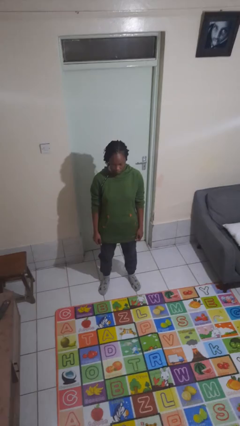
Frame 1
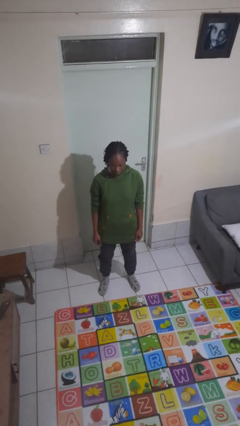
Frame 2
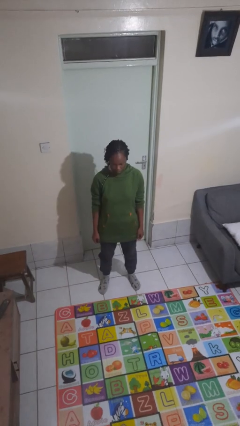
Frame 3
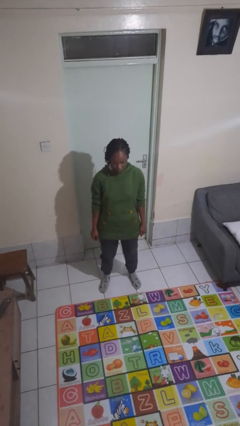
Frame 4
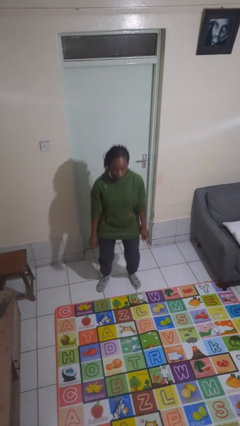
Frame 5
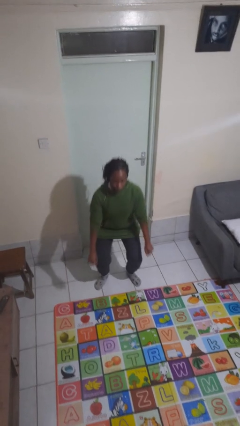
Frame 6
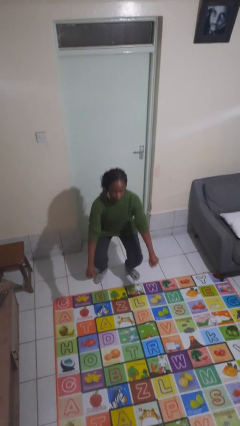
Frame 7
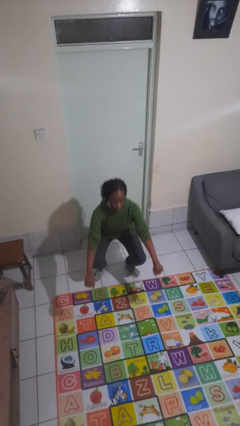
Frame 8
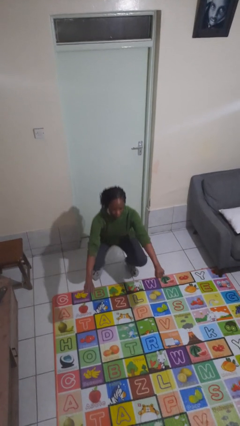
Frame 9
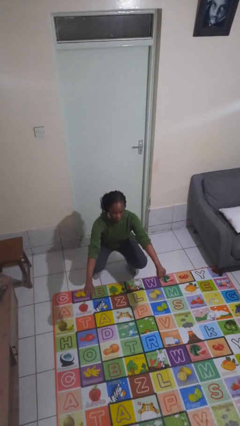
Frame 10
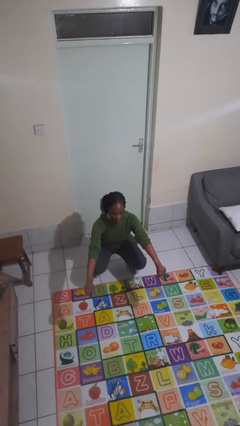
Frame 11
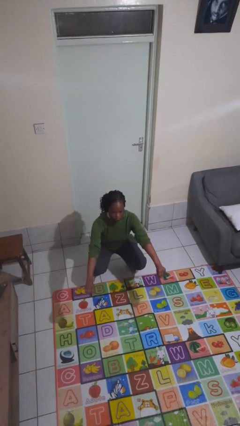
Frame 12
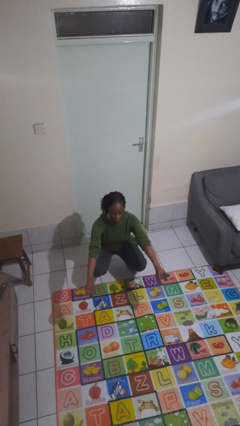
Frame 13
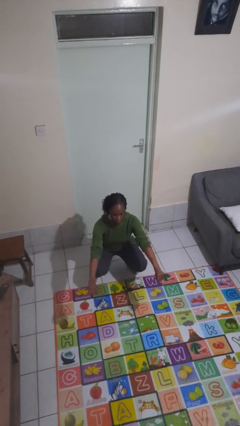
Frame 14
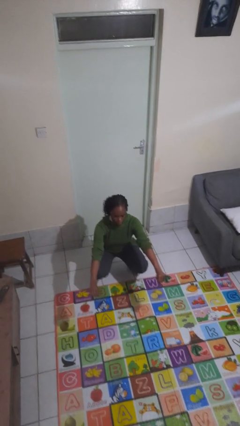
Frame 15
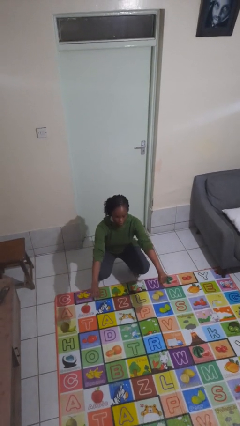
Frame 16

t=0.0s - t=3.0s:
person squats

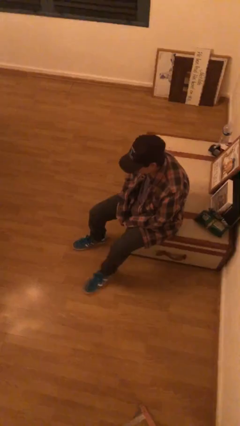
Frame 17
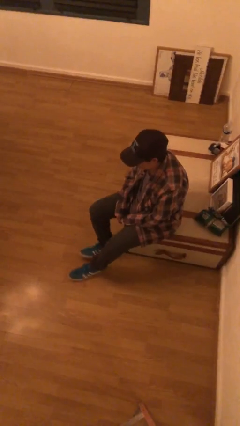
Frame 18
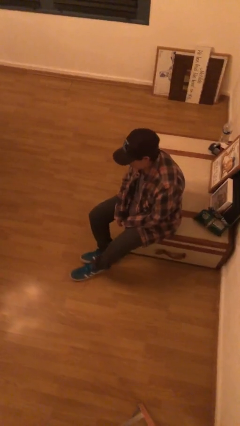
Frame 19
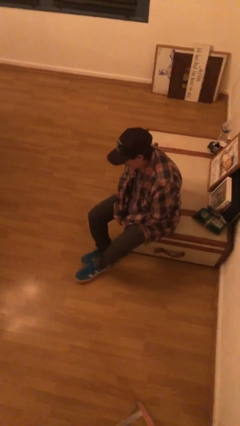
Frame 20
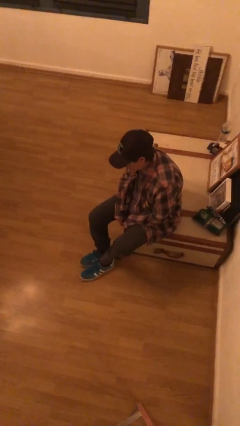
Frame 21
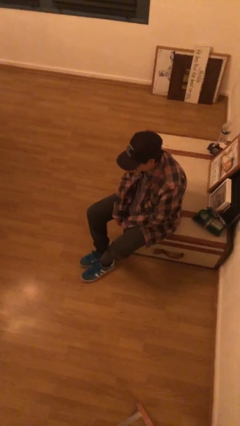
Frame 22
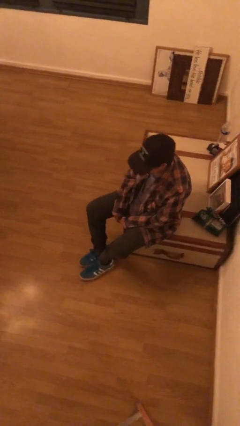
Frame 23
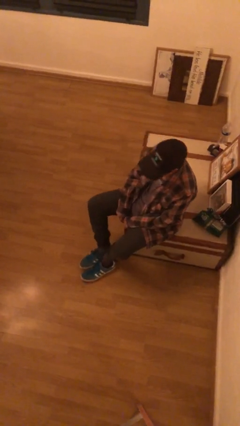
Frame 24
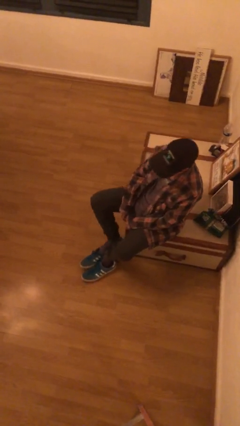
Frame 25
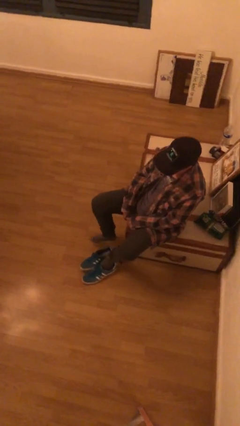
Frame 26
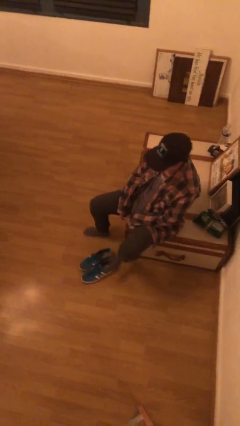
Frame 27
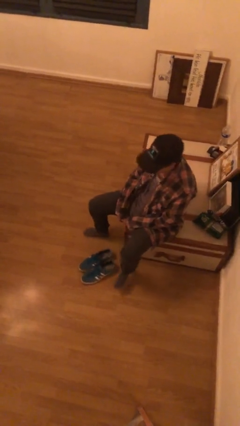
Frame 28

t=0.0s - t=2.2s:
person takes off shoes

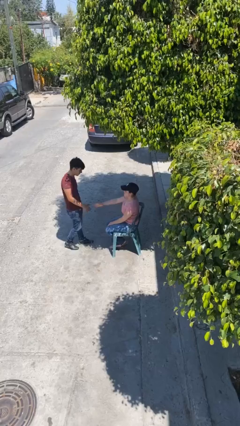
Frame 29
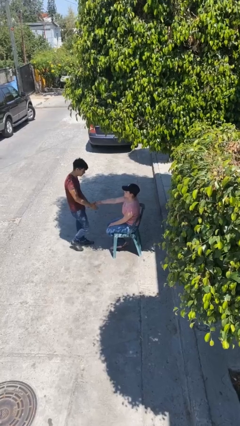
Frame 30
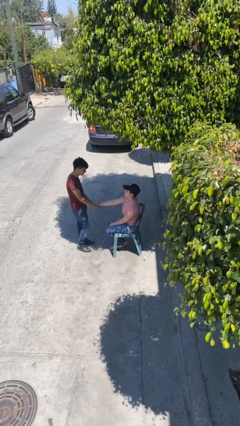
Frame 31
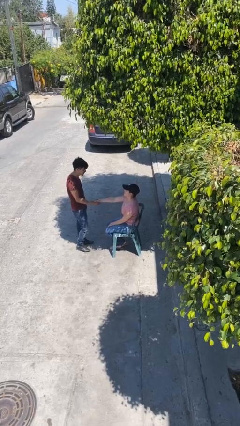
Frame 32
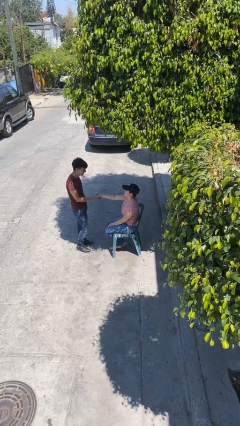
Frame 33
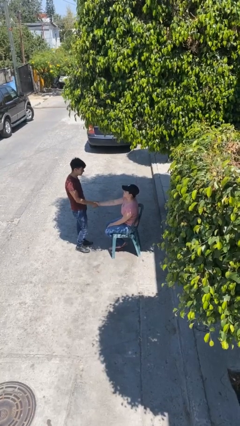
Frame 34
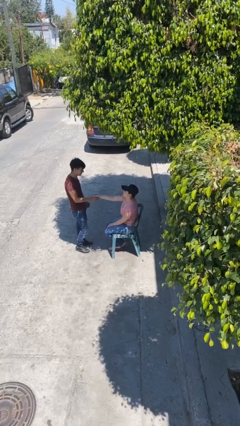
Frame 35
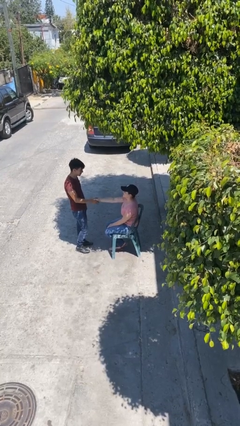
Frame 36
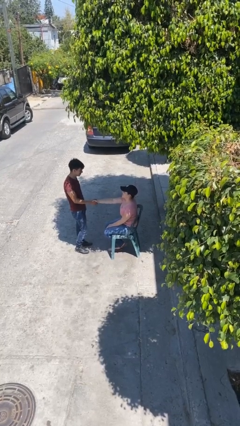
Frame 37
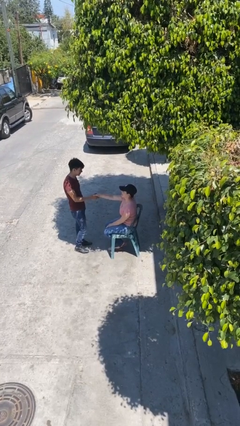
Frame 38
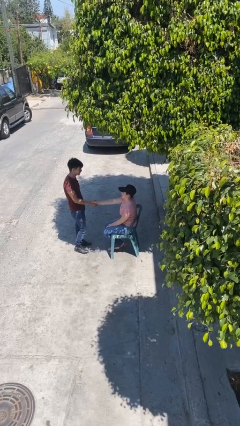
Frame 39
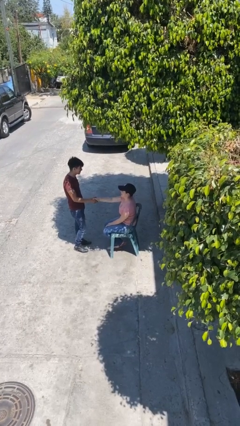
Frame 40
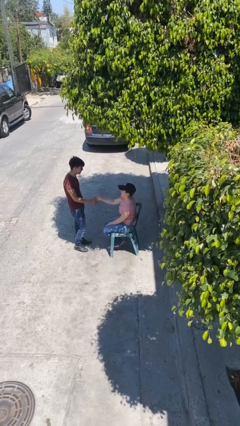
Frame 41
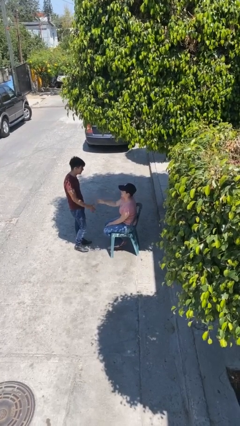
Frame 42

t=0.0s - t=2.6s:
person shakes hand

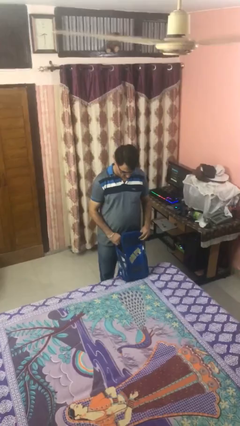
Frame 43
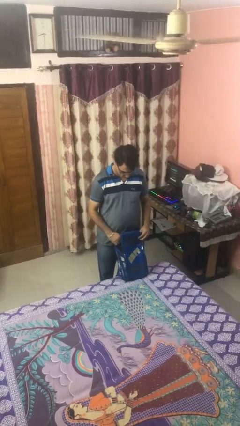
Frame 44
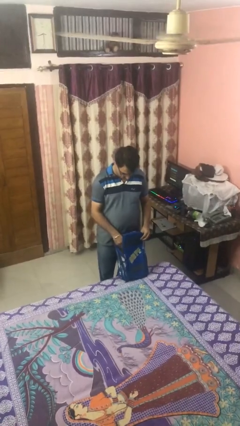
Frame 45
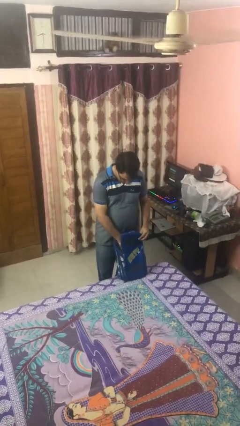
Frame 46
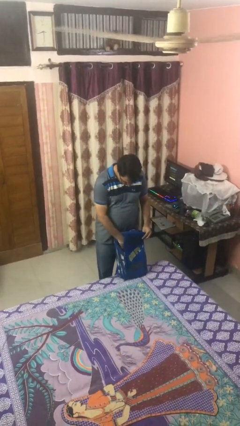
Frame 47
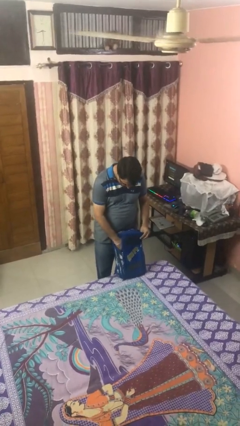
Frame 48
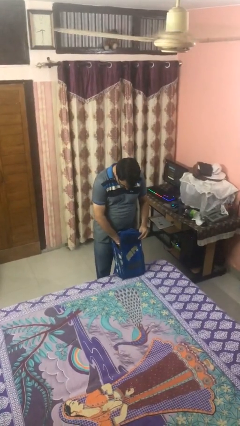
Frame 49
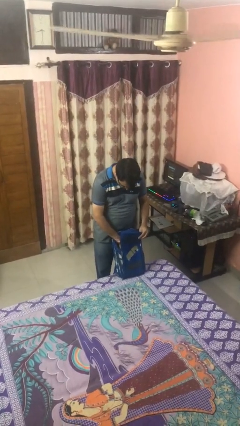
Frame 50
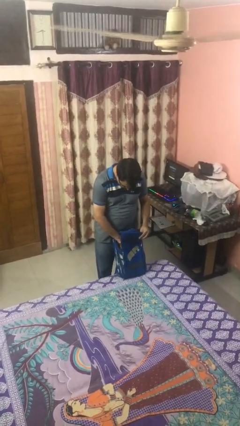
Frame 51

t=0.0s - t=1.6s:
person searches in backpack

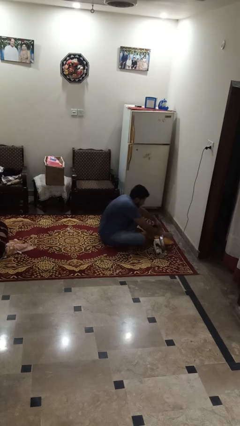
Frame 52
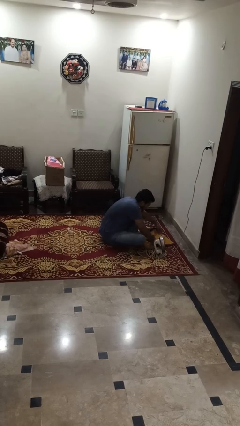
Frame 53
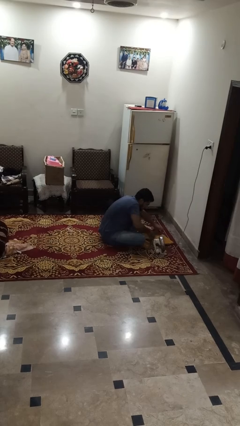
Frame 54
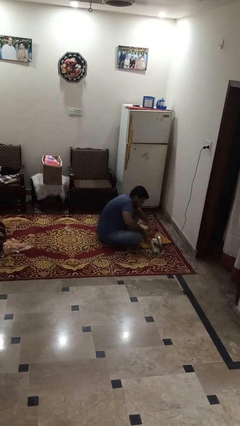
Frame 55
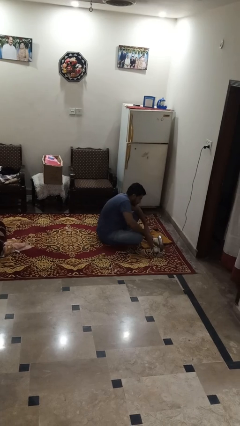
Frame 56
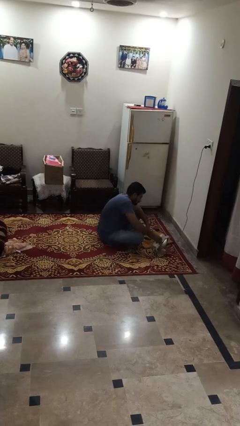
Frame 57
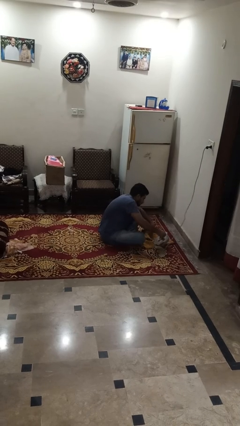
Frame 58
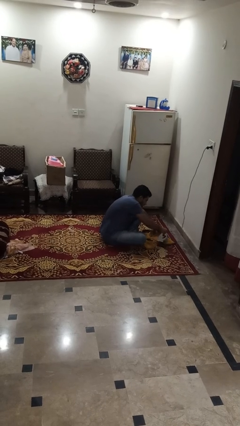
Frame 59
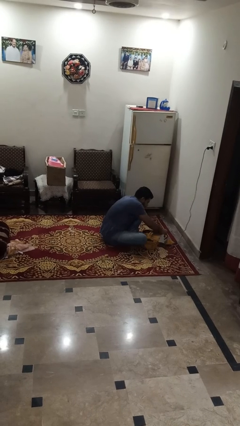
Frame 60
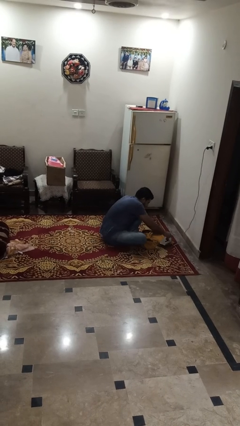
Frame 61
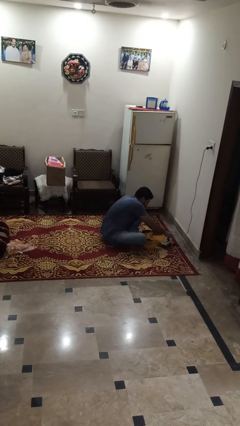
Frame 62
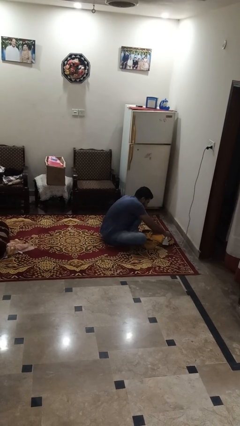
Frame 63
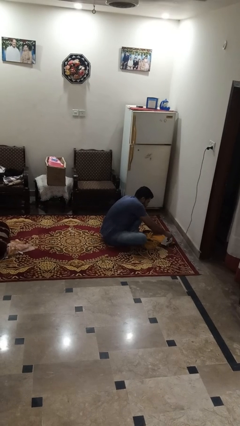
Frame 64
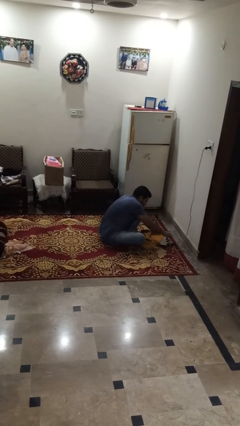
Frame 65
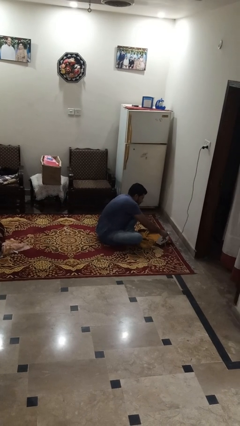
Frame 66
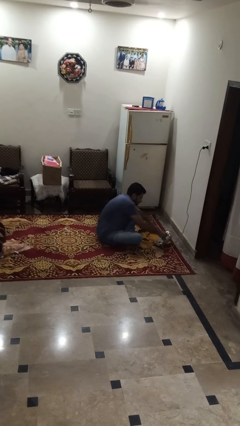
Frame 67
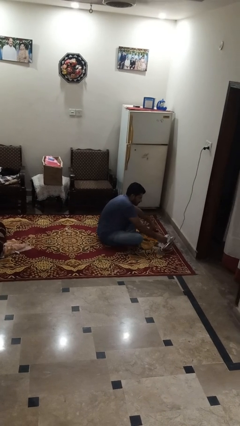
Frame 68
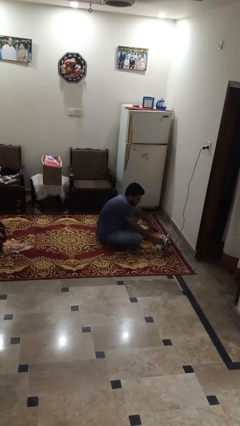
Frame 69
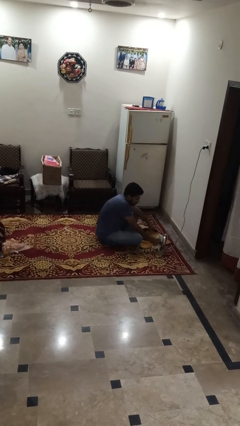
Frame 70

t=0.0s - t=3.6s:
person irons clothes

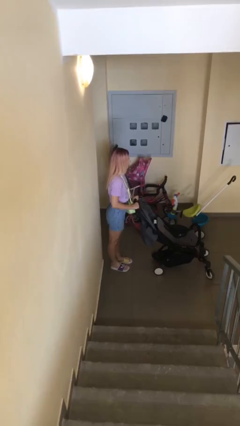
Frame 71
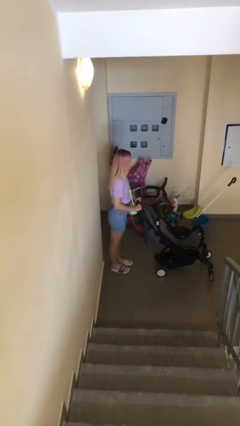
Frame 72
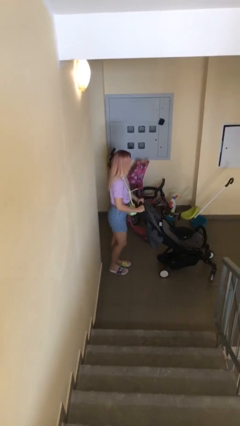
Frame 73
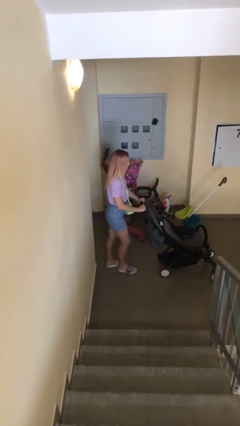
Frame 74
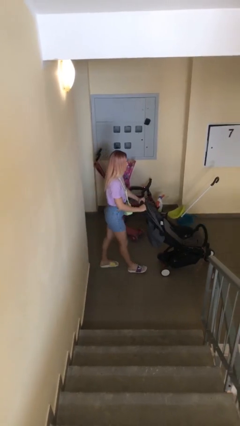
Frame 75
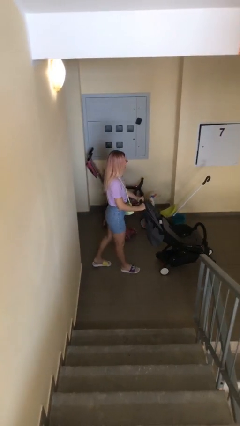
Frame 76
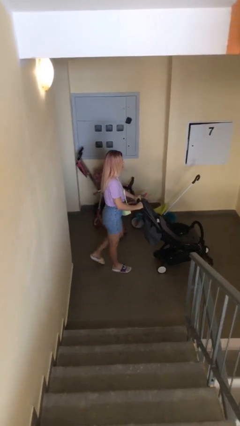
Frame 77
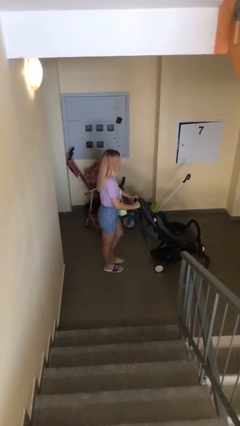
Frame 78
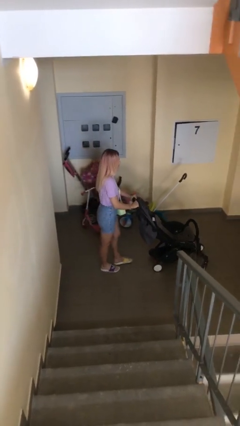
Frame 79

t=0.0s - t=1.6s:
person pushes wheeled cart

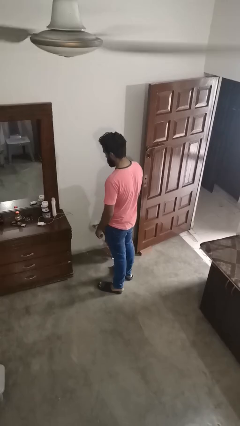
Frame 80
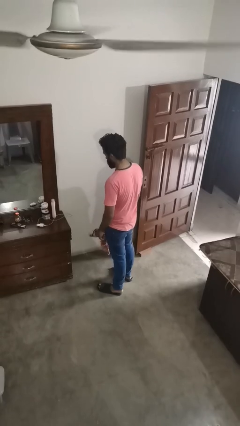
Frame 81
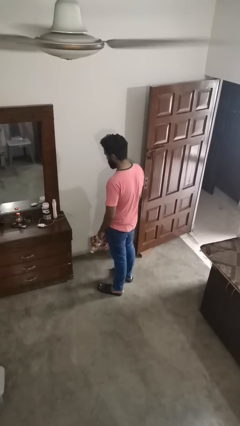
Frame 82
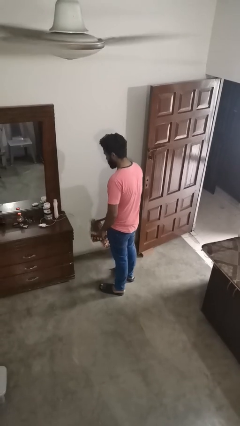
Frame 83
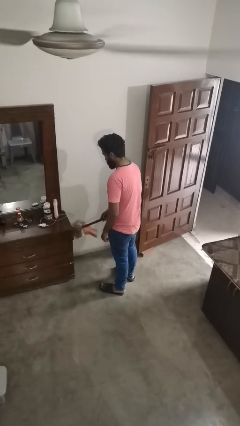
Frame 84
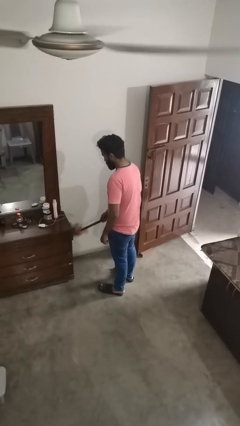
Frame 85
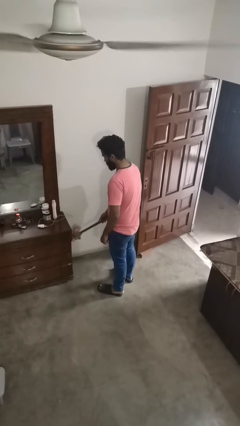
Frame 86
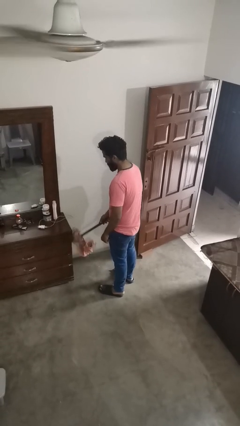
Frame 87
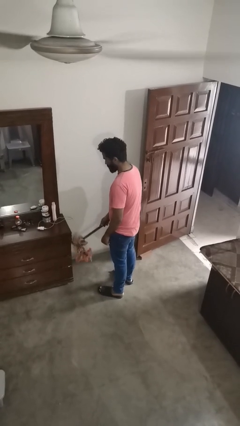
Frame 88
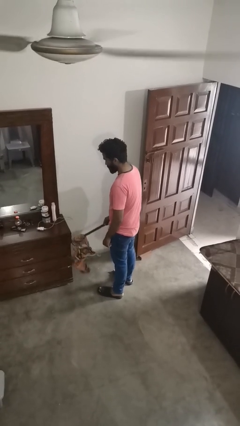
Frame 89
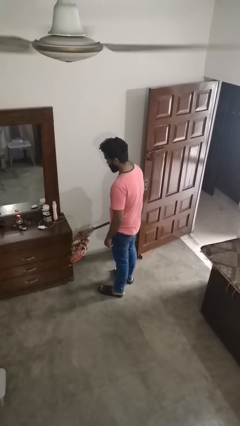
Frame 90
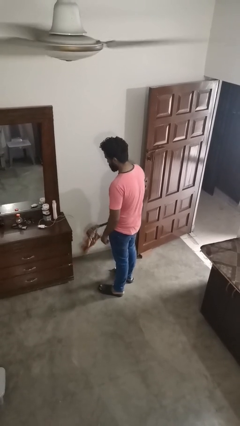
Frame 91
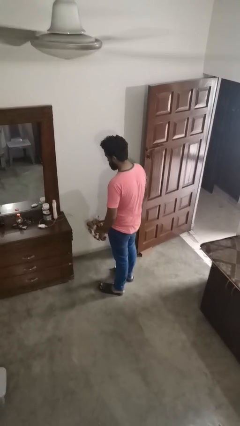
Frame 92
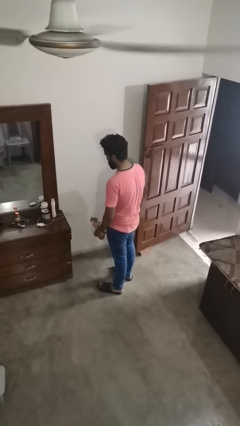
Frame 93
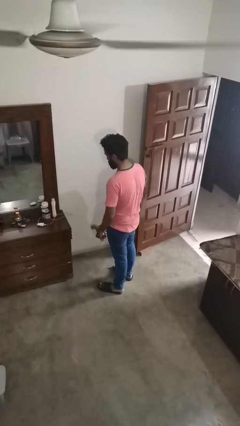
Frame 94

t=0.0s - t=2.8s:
person dusts furniture
